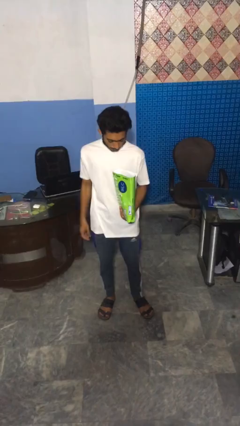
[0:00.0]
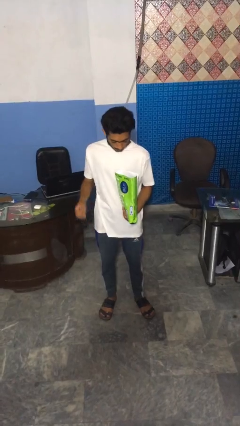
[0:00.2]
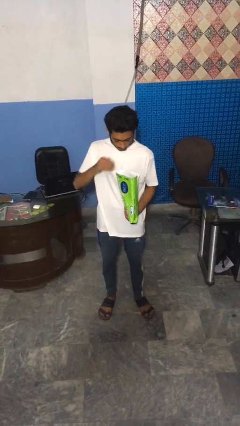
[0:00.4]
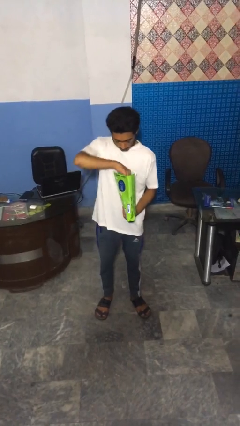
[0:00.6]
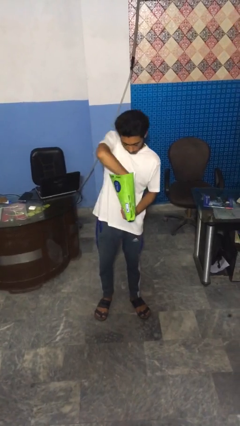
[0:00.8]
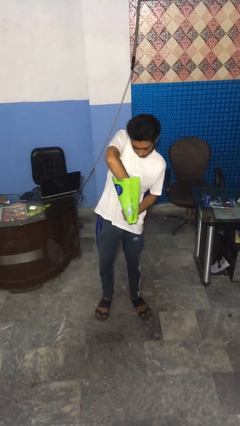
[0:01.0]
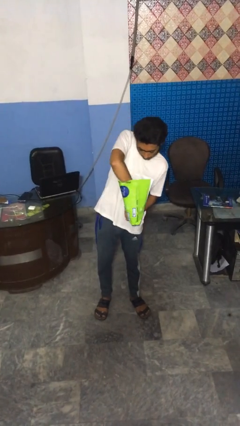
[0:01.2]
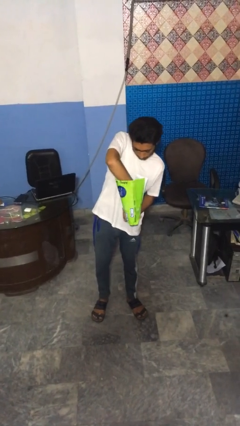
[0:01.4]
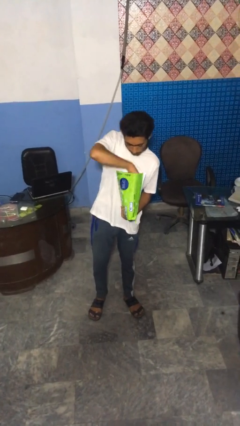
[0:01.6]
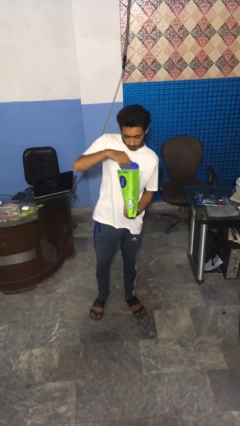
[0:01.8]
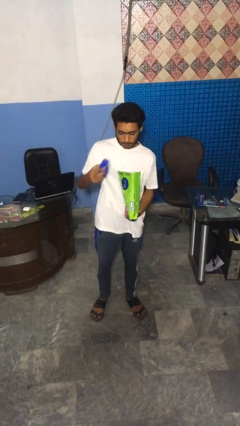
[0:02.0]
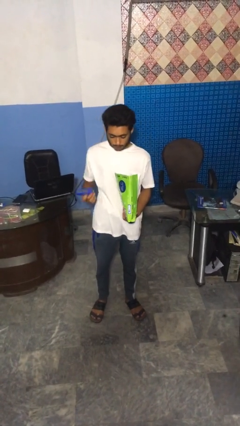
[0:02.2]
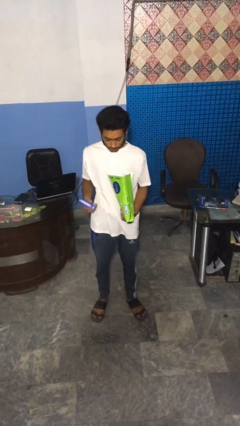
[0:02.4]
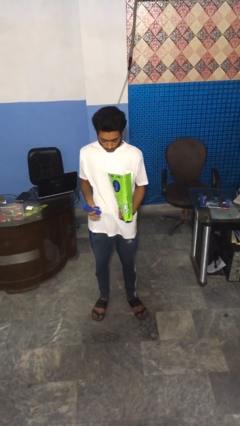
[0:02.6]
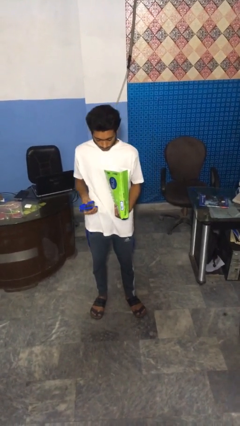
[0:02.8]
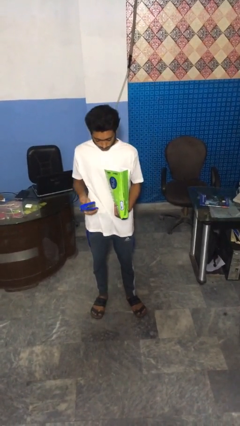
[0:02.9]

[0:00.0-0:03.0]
person takes object from bag

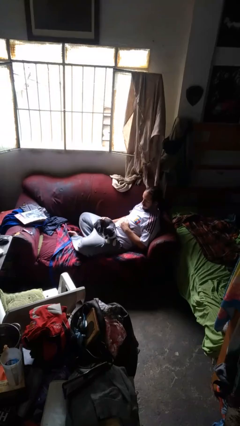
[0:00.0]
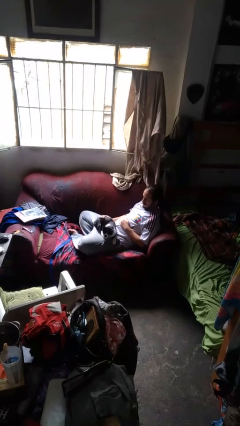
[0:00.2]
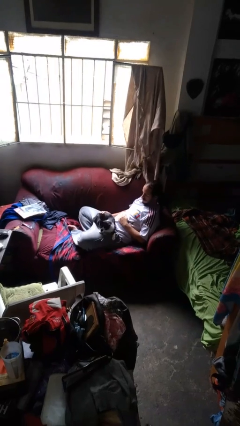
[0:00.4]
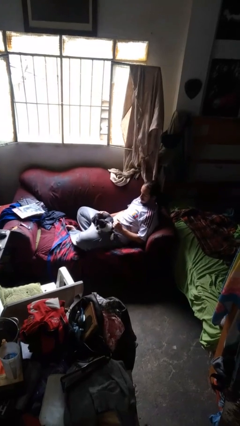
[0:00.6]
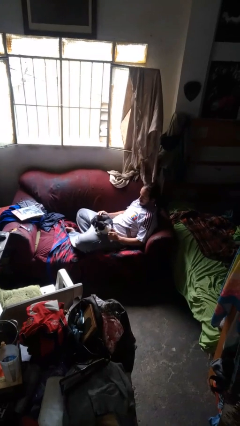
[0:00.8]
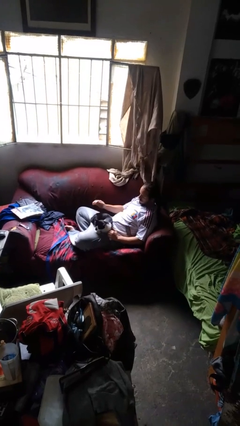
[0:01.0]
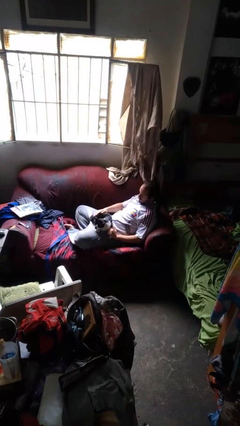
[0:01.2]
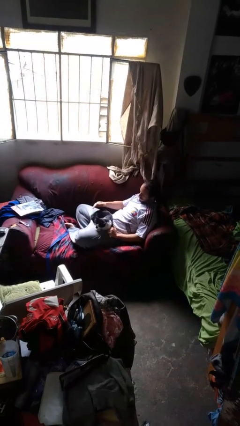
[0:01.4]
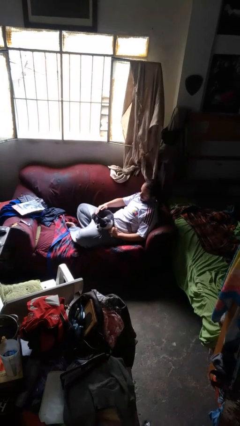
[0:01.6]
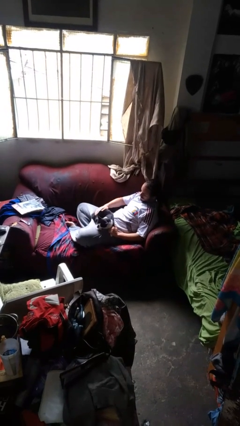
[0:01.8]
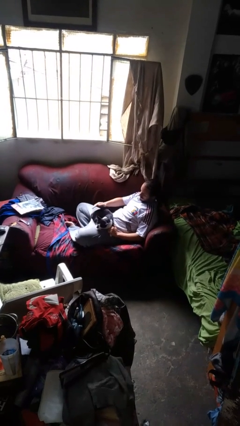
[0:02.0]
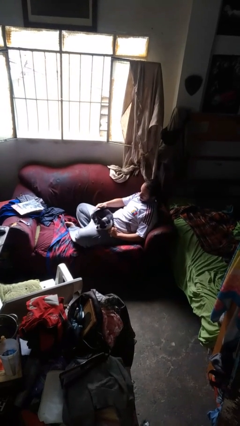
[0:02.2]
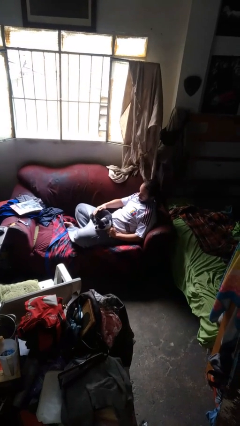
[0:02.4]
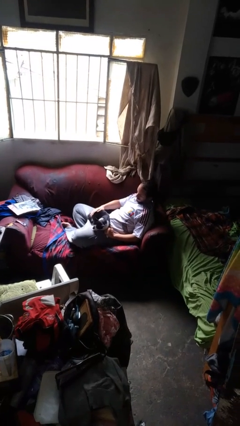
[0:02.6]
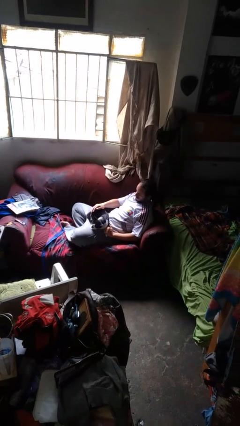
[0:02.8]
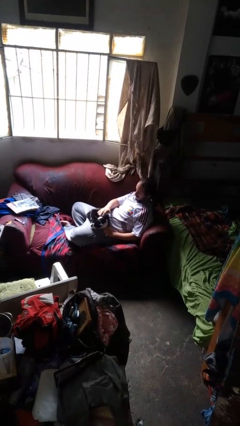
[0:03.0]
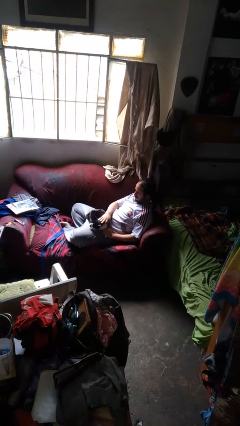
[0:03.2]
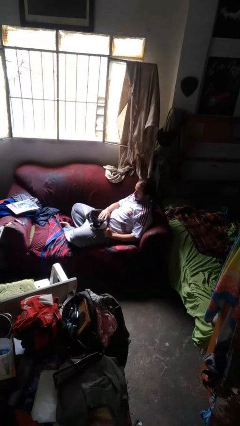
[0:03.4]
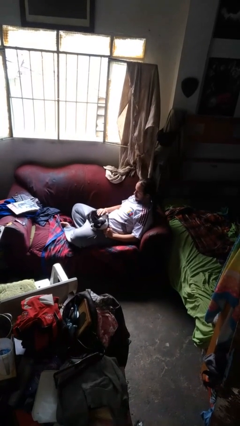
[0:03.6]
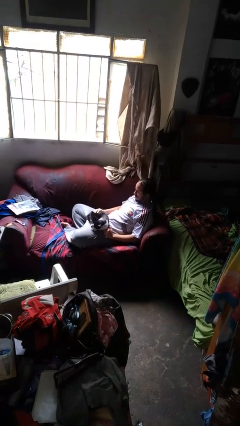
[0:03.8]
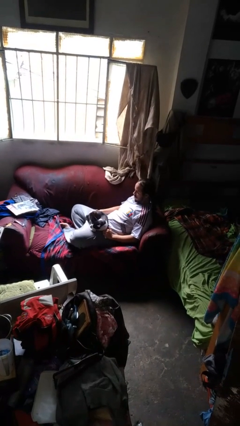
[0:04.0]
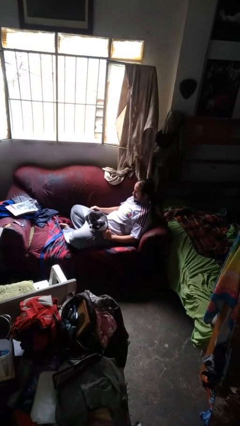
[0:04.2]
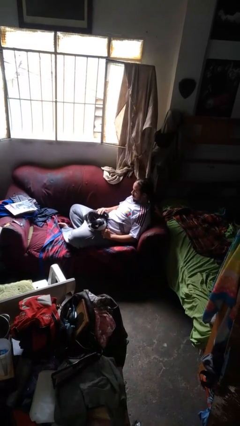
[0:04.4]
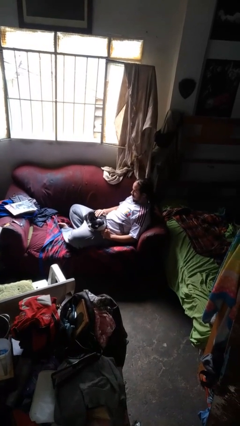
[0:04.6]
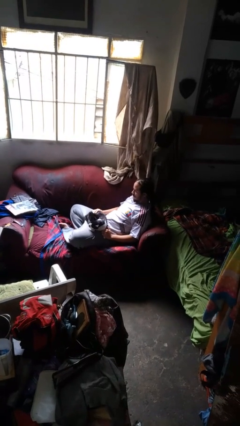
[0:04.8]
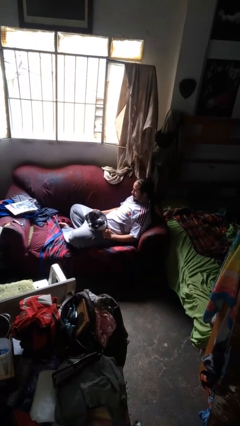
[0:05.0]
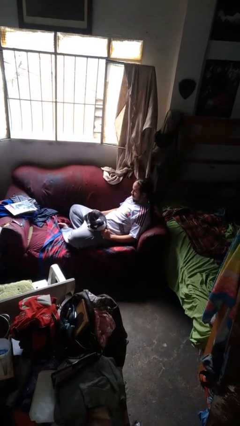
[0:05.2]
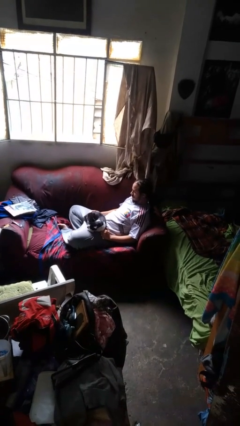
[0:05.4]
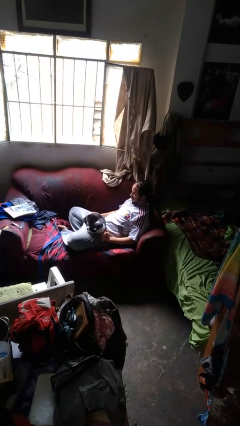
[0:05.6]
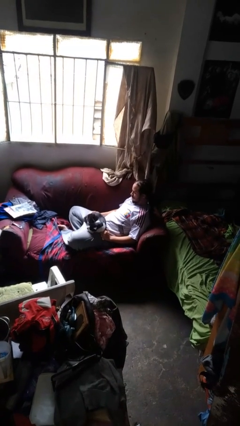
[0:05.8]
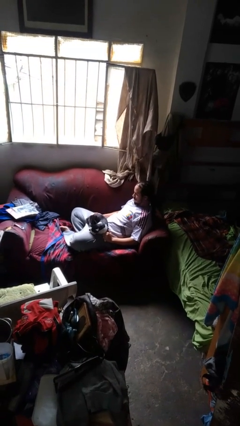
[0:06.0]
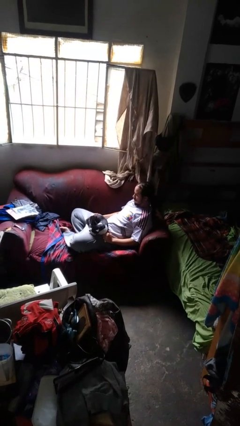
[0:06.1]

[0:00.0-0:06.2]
person pets cat

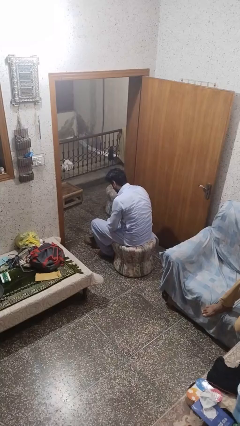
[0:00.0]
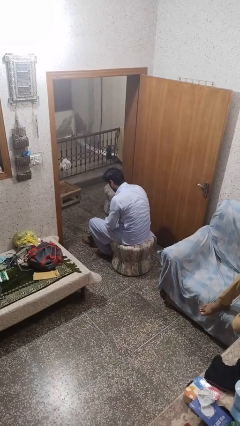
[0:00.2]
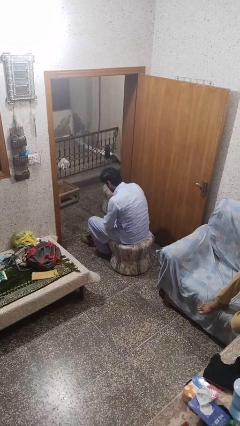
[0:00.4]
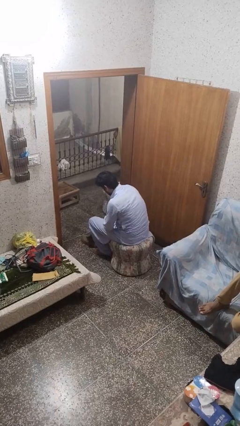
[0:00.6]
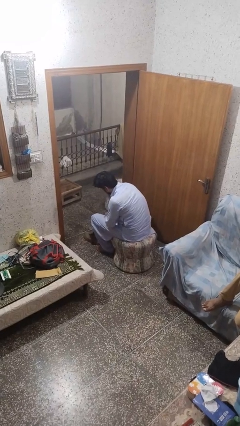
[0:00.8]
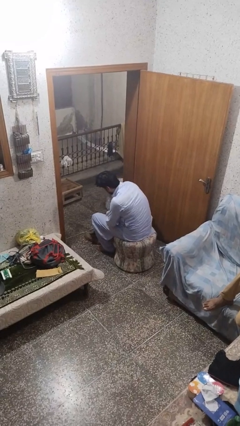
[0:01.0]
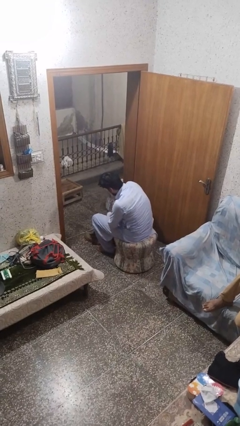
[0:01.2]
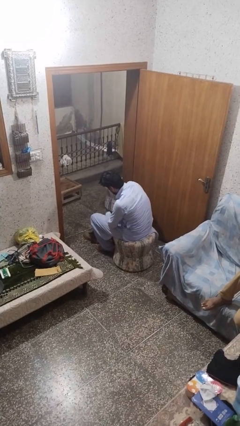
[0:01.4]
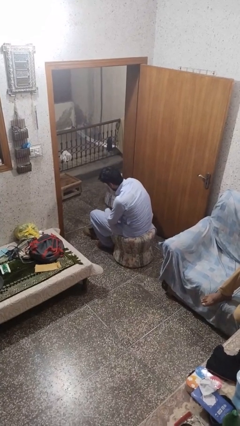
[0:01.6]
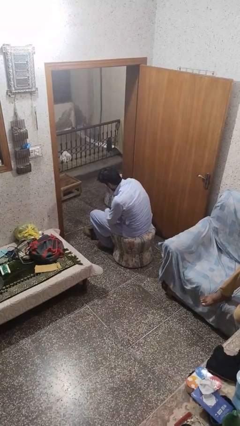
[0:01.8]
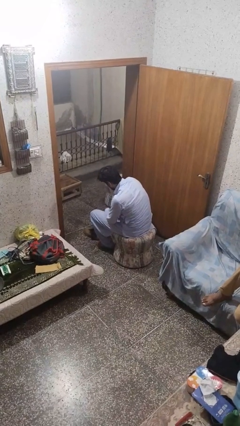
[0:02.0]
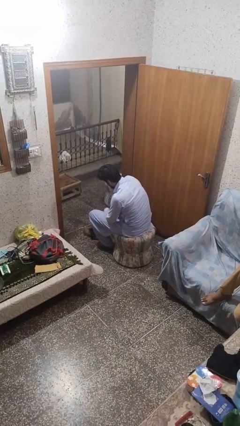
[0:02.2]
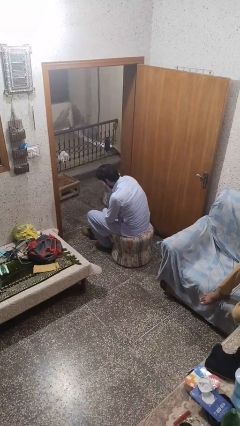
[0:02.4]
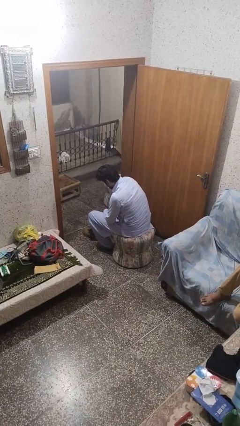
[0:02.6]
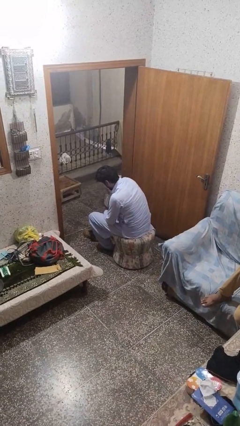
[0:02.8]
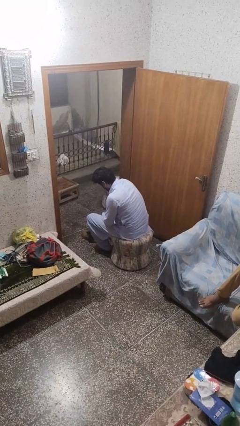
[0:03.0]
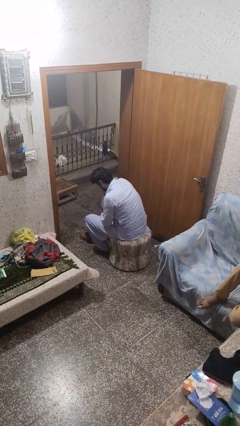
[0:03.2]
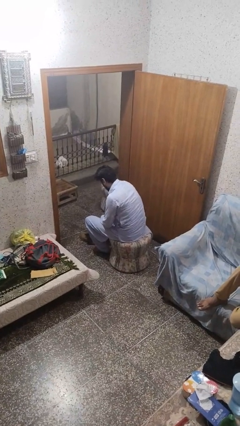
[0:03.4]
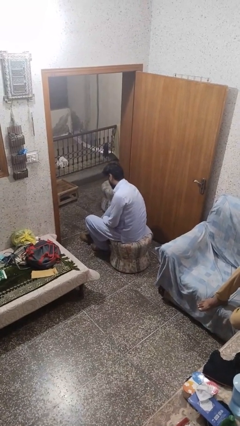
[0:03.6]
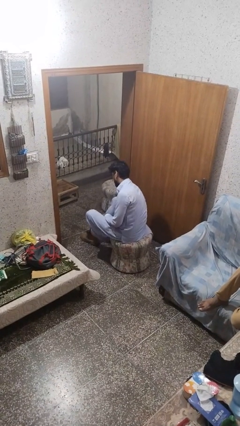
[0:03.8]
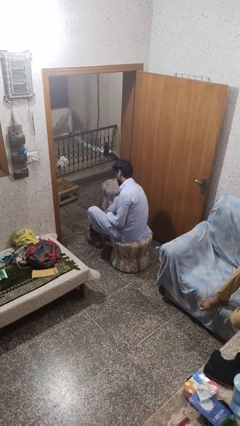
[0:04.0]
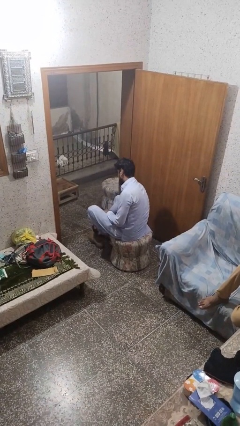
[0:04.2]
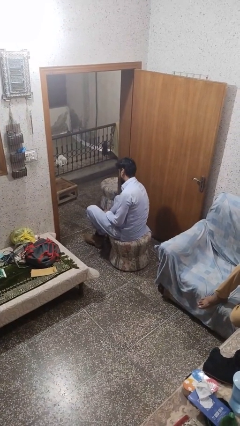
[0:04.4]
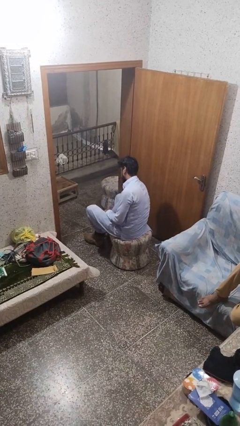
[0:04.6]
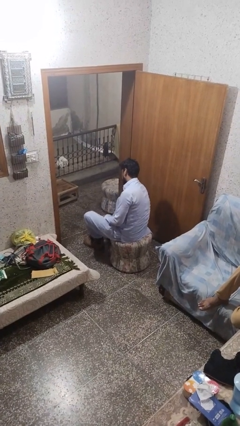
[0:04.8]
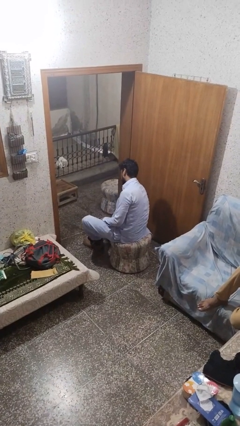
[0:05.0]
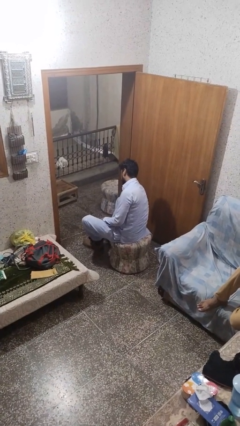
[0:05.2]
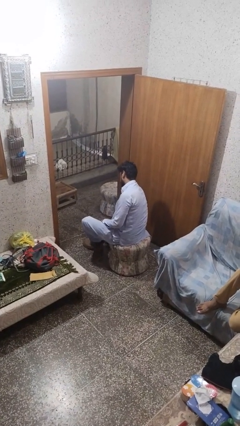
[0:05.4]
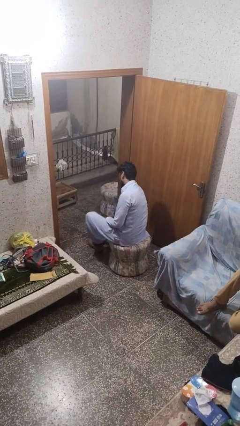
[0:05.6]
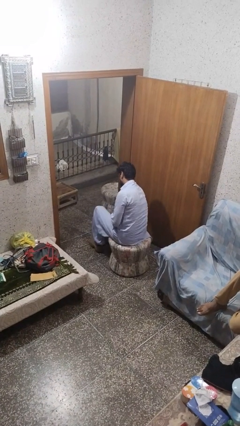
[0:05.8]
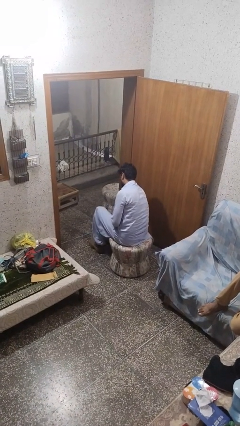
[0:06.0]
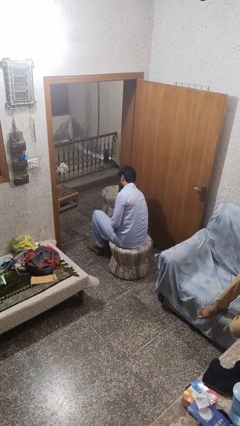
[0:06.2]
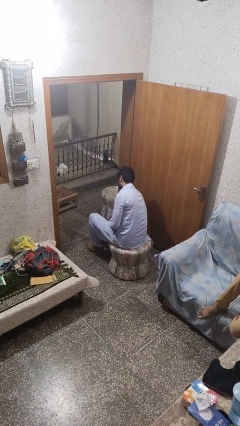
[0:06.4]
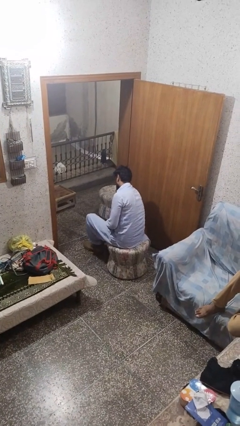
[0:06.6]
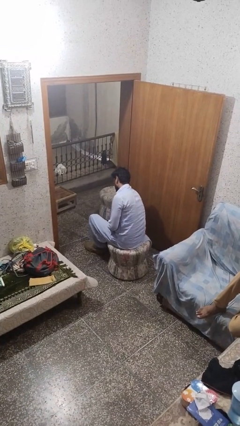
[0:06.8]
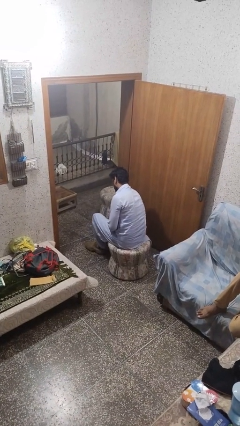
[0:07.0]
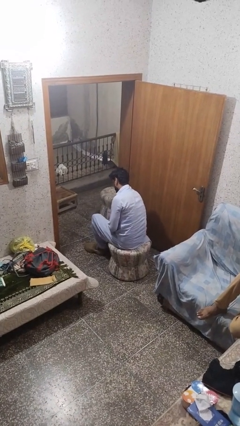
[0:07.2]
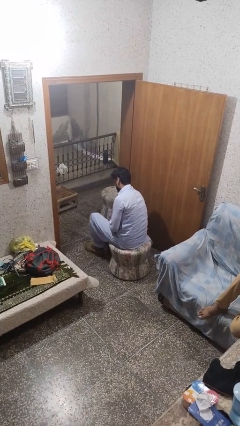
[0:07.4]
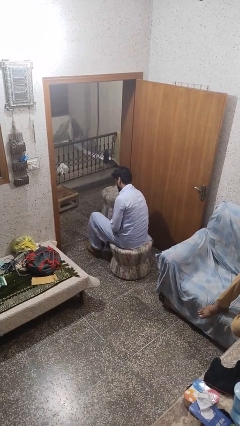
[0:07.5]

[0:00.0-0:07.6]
person puts on shoes

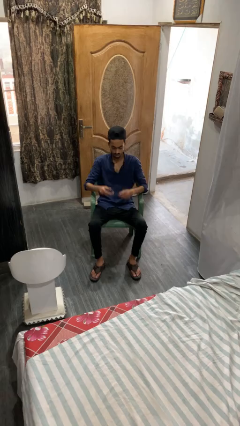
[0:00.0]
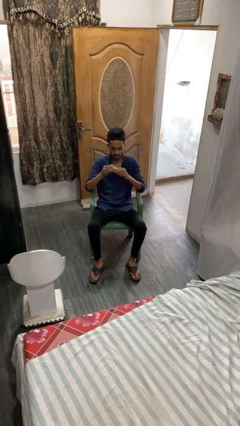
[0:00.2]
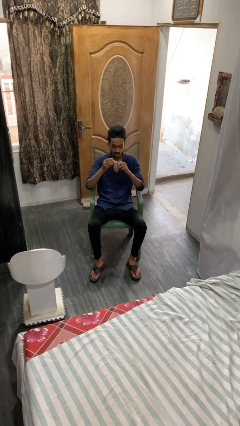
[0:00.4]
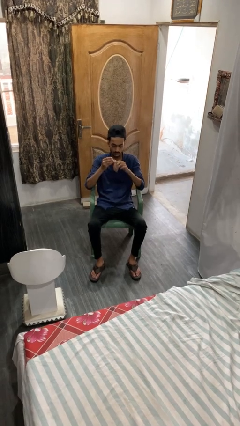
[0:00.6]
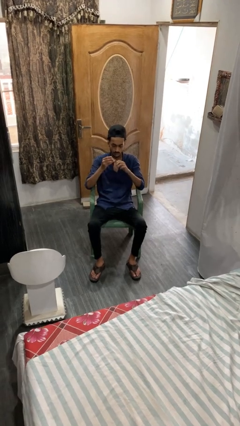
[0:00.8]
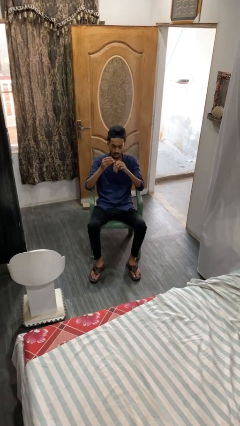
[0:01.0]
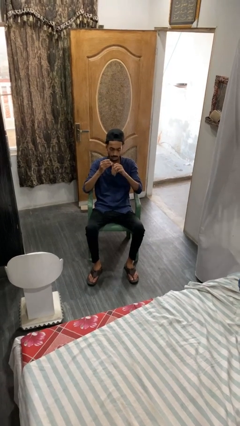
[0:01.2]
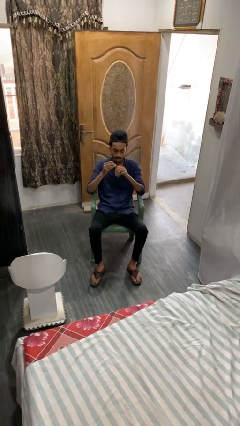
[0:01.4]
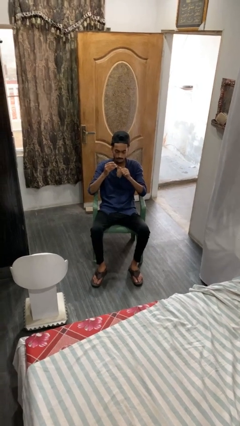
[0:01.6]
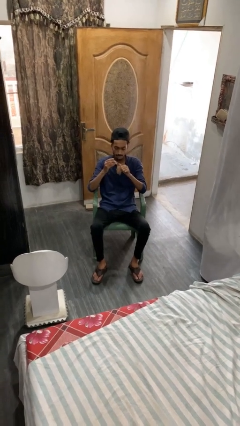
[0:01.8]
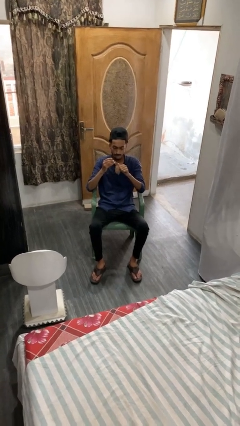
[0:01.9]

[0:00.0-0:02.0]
person clips fingernails
